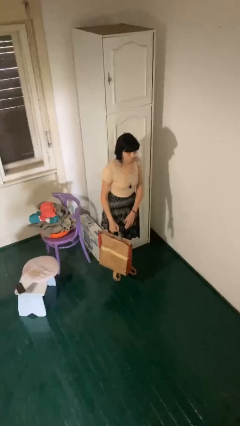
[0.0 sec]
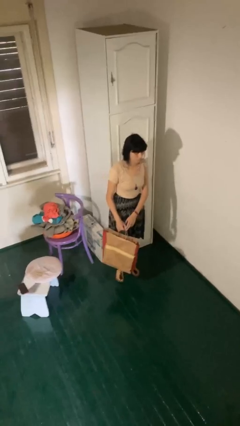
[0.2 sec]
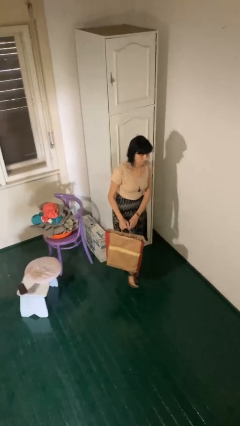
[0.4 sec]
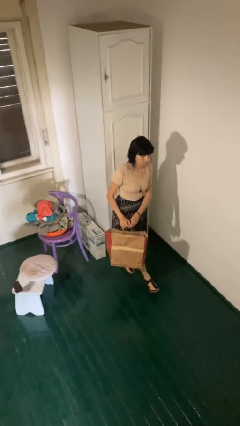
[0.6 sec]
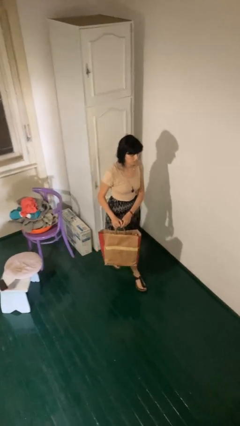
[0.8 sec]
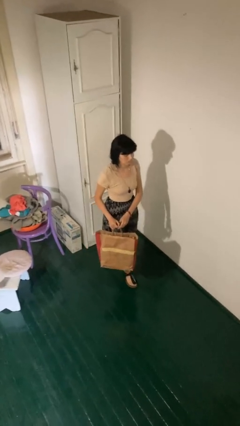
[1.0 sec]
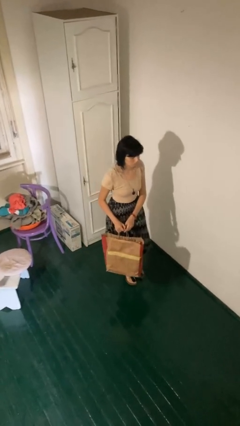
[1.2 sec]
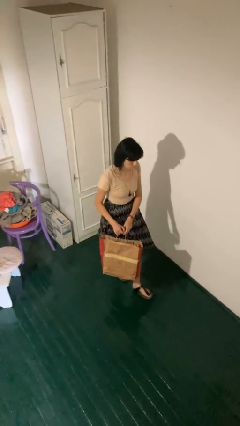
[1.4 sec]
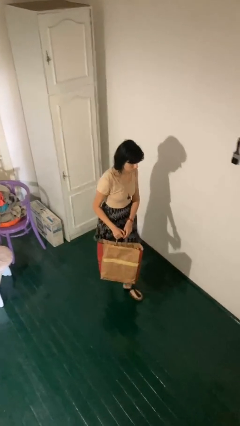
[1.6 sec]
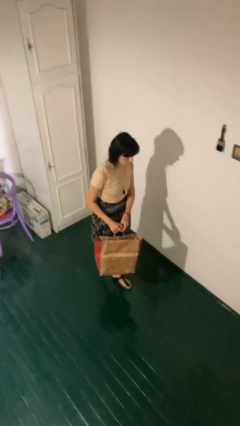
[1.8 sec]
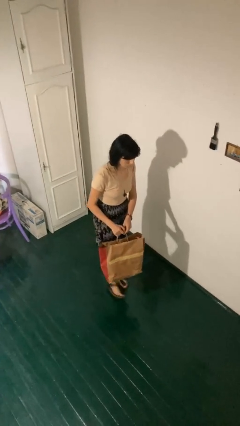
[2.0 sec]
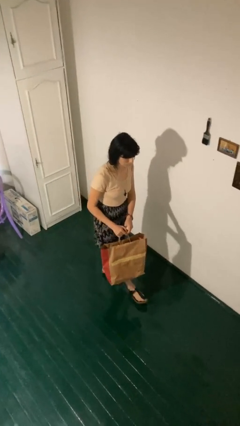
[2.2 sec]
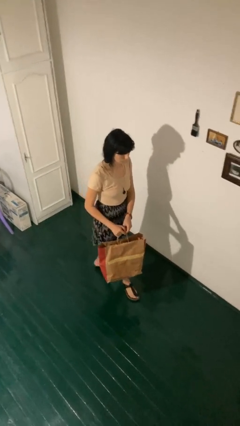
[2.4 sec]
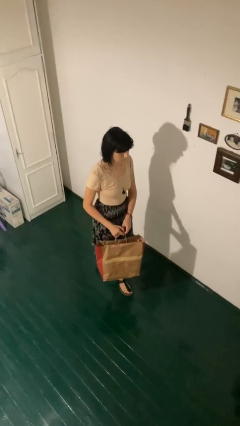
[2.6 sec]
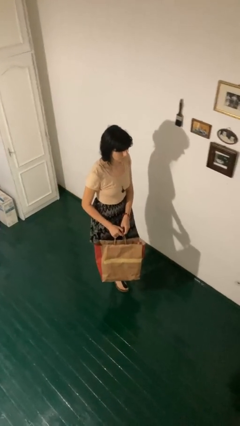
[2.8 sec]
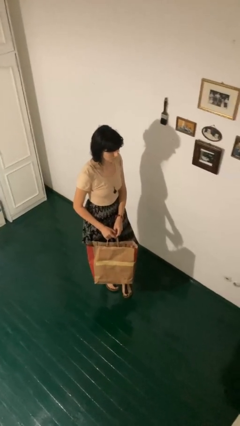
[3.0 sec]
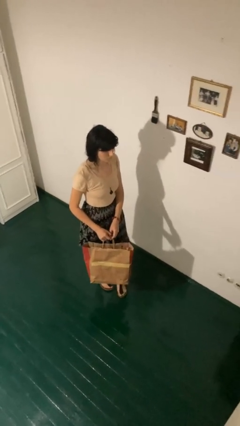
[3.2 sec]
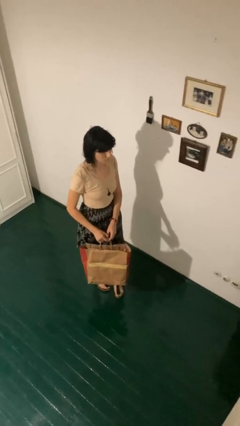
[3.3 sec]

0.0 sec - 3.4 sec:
person carries groceries

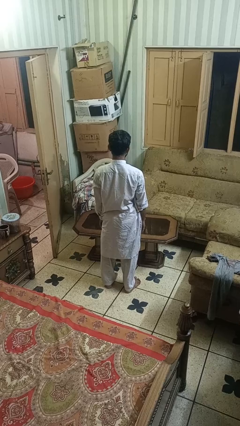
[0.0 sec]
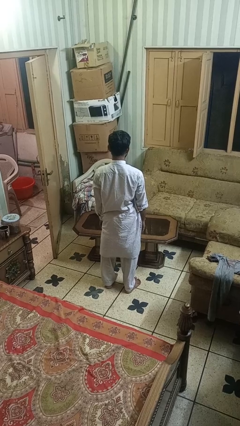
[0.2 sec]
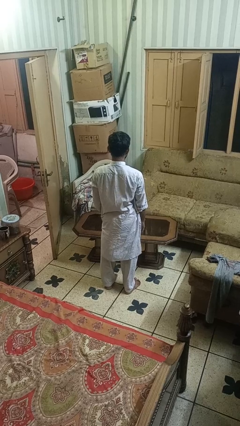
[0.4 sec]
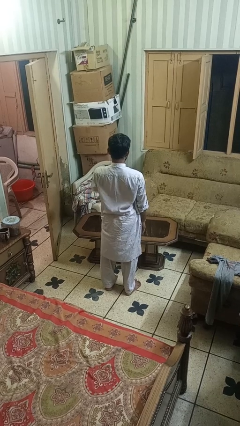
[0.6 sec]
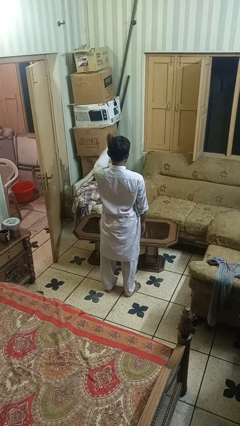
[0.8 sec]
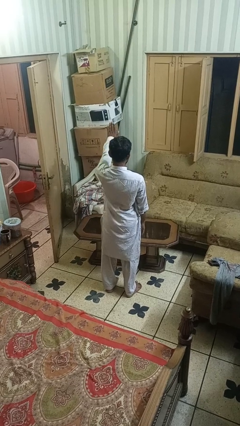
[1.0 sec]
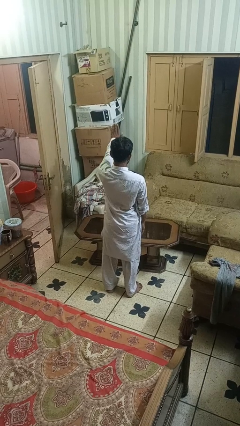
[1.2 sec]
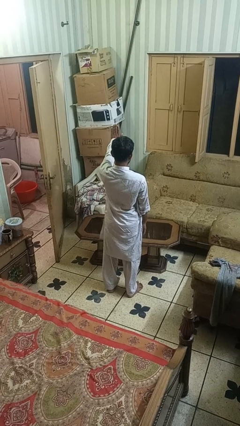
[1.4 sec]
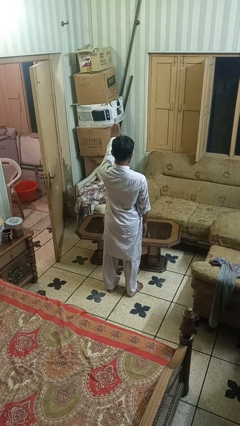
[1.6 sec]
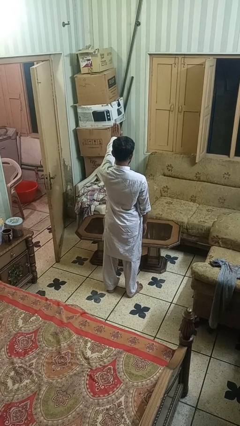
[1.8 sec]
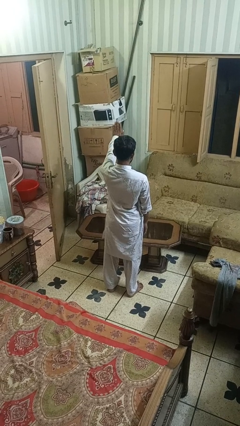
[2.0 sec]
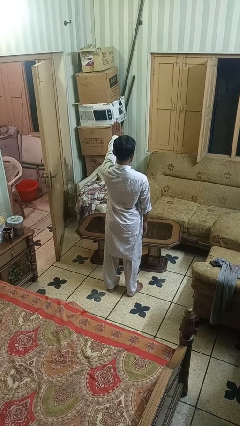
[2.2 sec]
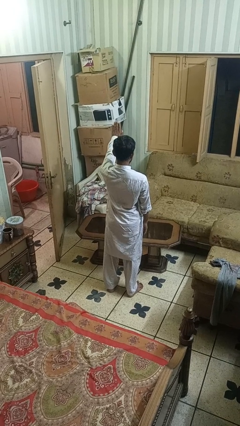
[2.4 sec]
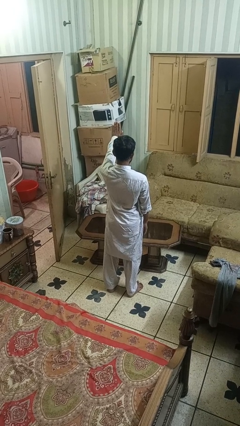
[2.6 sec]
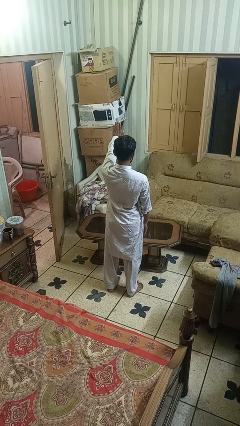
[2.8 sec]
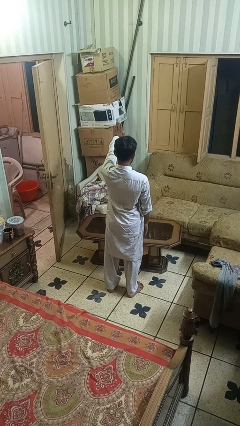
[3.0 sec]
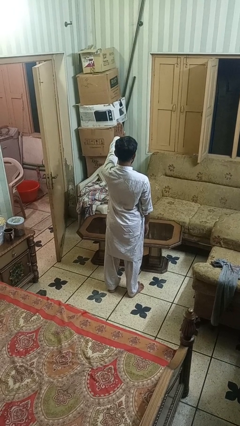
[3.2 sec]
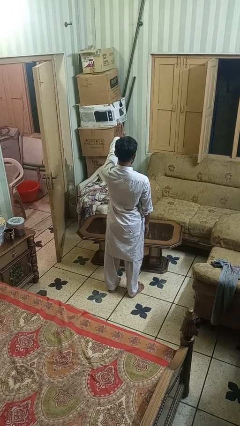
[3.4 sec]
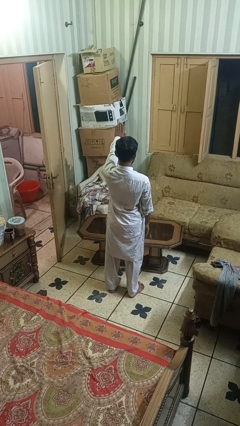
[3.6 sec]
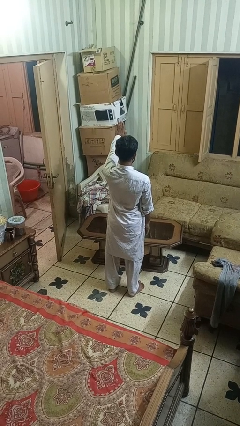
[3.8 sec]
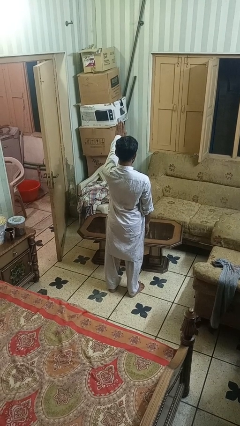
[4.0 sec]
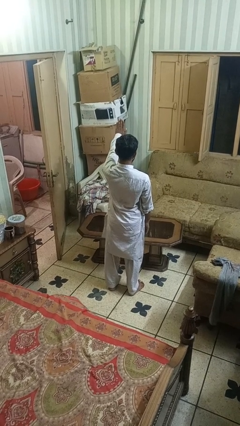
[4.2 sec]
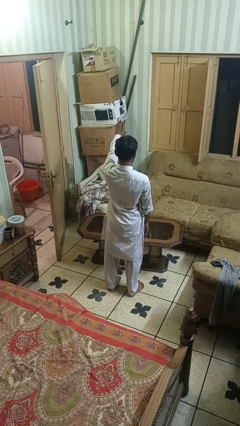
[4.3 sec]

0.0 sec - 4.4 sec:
person gestures stop

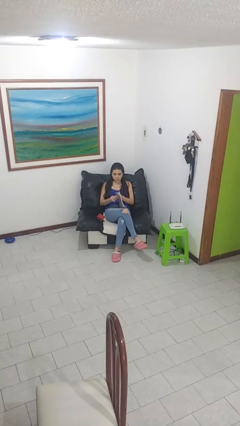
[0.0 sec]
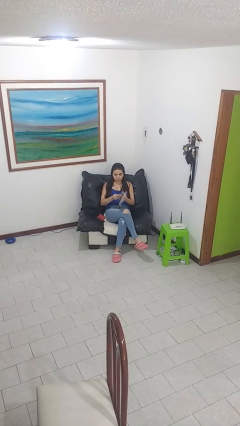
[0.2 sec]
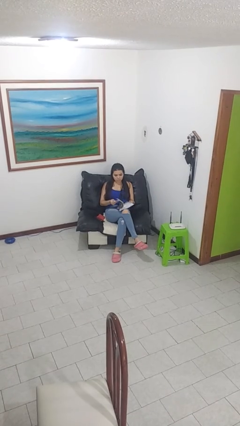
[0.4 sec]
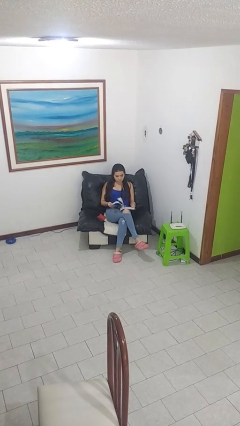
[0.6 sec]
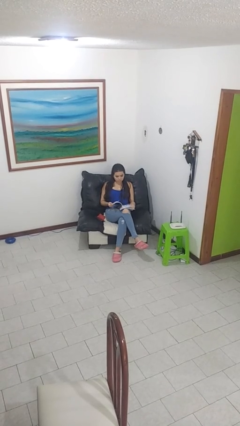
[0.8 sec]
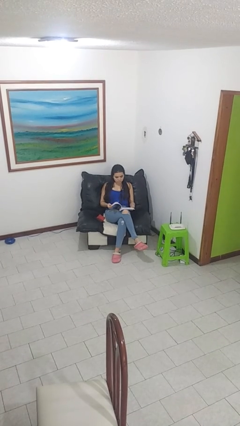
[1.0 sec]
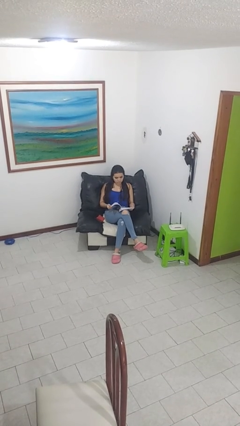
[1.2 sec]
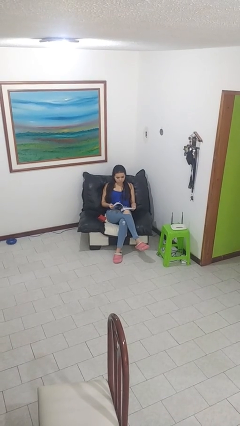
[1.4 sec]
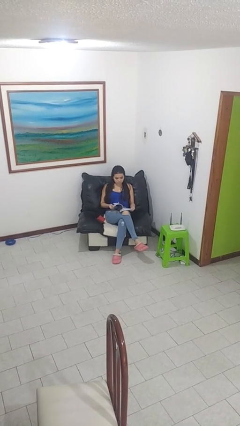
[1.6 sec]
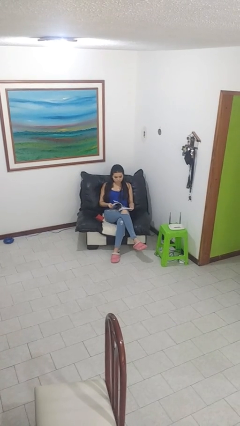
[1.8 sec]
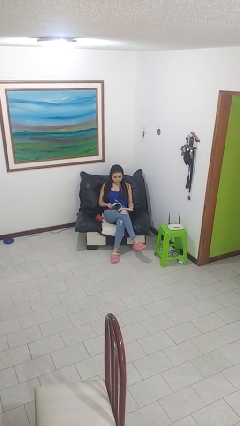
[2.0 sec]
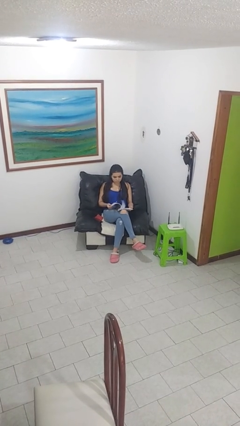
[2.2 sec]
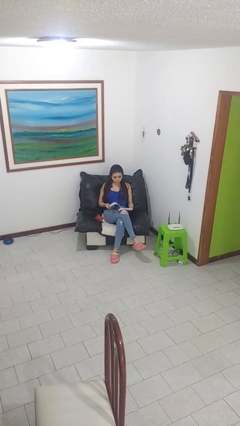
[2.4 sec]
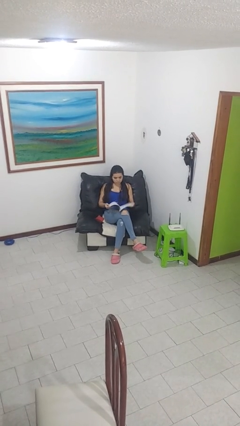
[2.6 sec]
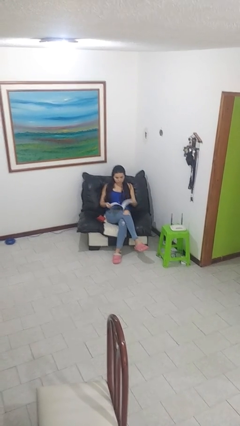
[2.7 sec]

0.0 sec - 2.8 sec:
person reads magazine

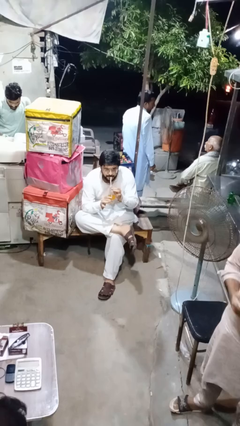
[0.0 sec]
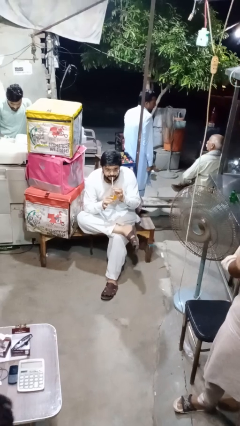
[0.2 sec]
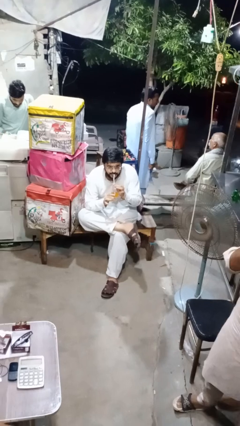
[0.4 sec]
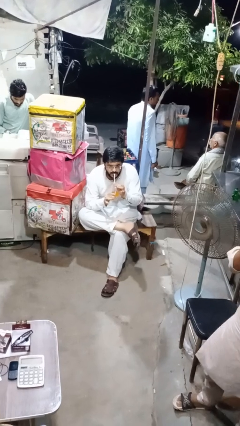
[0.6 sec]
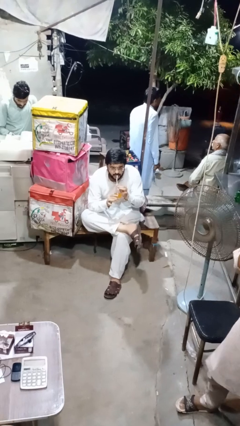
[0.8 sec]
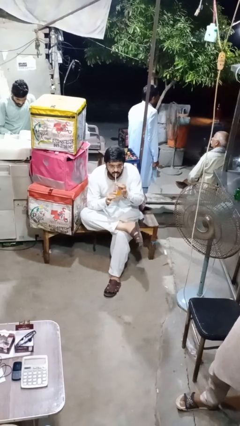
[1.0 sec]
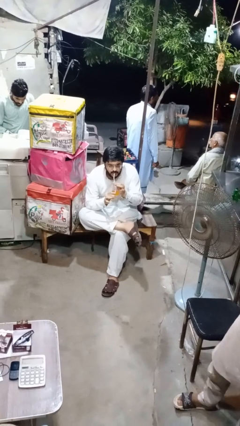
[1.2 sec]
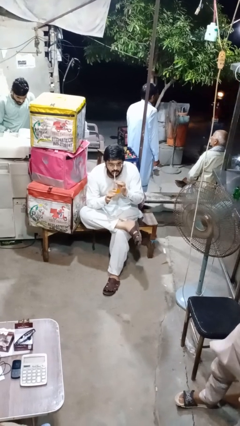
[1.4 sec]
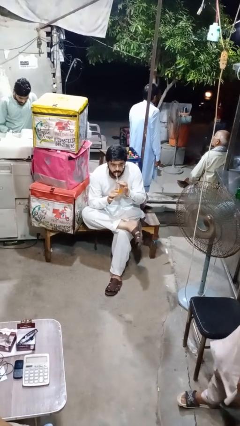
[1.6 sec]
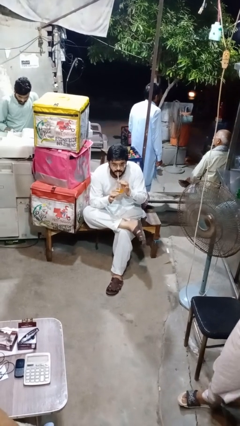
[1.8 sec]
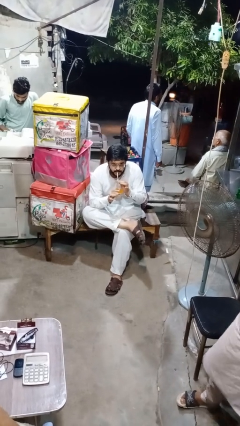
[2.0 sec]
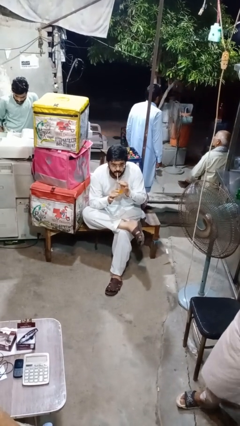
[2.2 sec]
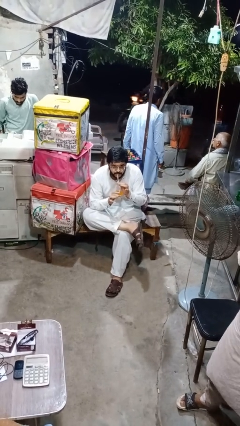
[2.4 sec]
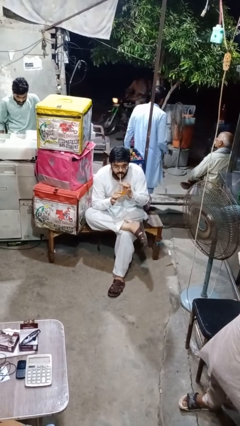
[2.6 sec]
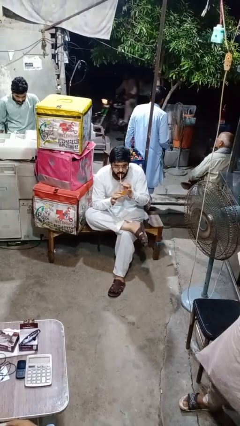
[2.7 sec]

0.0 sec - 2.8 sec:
person drinks from straw

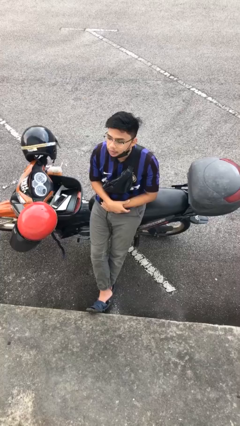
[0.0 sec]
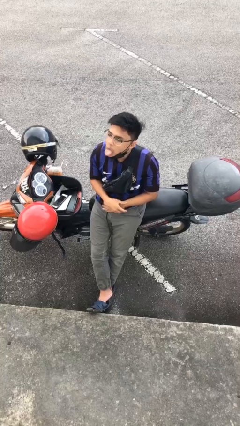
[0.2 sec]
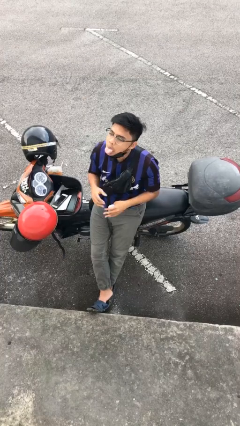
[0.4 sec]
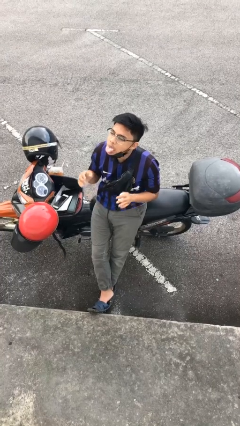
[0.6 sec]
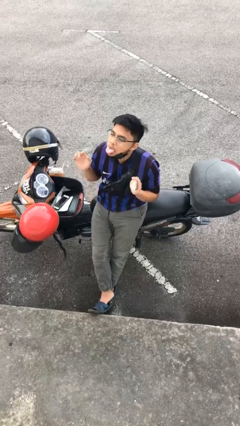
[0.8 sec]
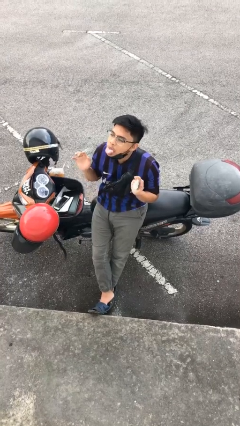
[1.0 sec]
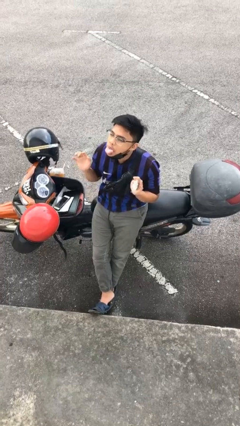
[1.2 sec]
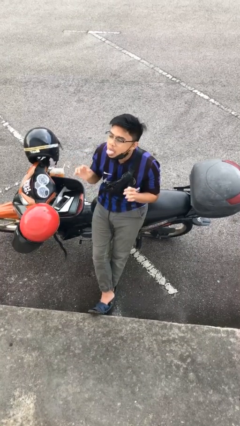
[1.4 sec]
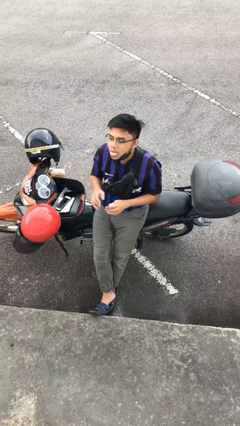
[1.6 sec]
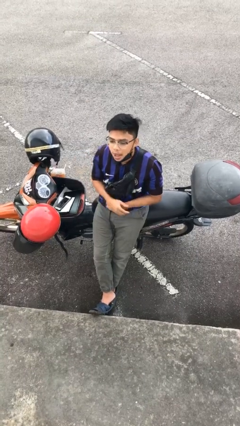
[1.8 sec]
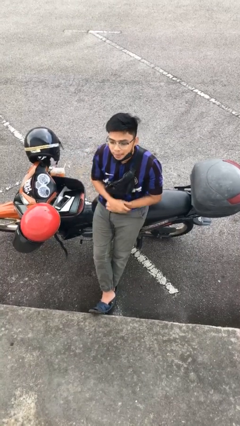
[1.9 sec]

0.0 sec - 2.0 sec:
person sticks out tongue

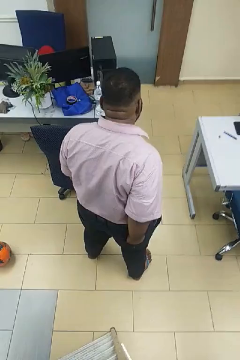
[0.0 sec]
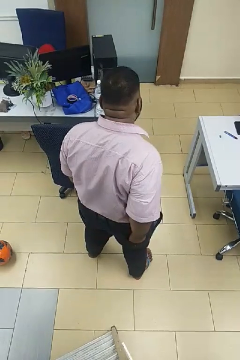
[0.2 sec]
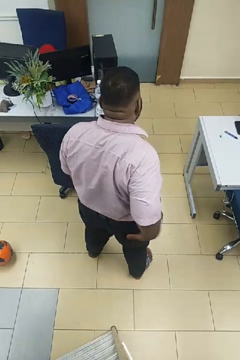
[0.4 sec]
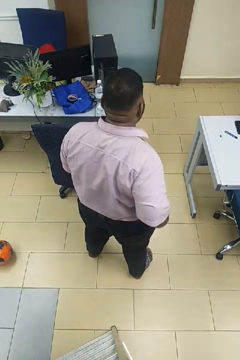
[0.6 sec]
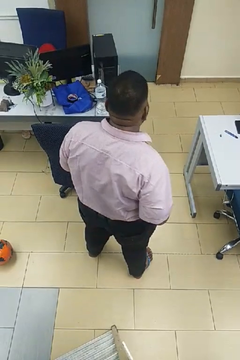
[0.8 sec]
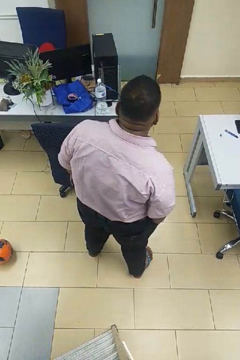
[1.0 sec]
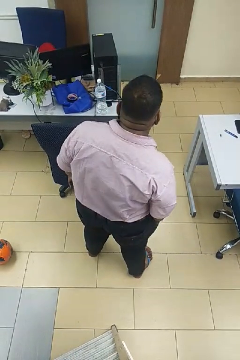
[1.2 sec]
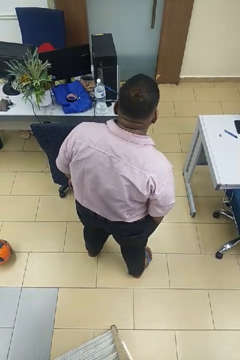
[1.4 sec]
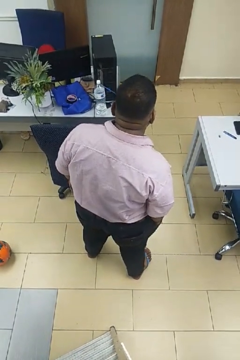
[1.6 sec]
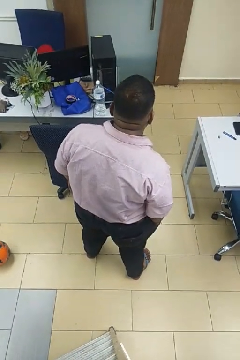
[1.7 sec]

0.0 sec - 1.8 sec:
person puts hands in back pockets

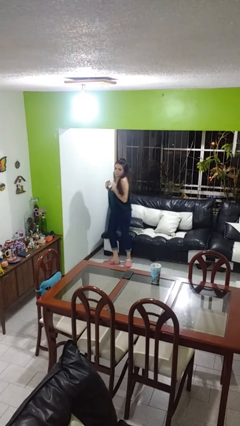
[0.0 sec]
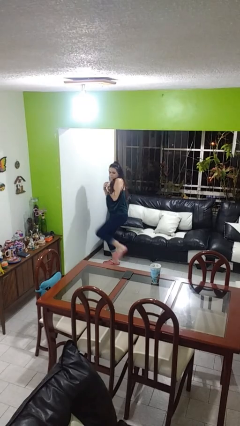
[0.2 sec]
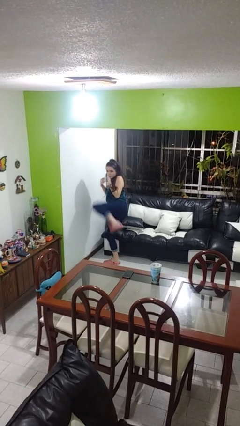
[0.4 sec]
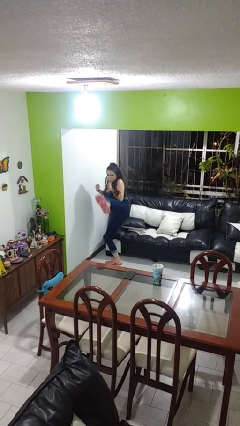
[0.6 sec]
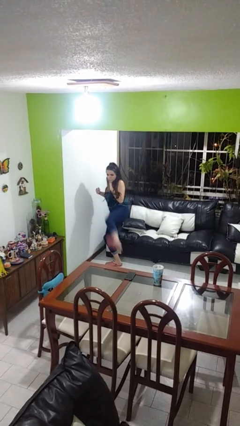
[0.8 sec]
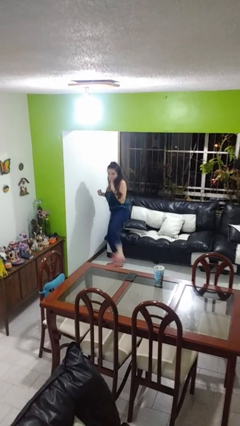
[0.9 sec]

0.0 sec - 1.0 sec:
person karate kicks
